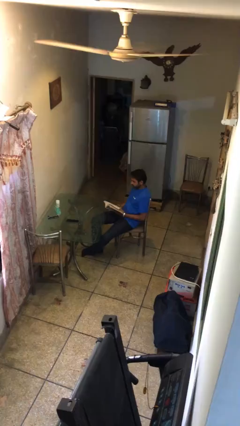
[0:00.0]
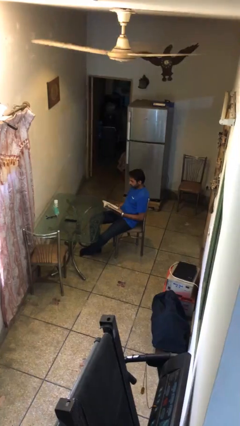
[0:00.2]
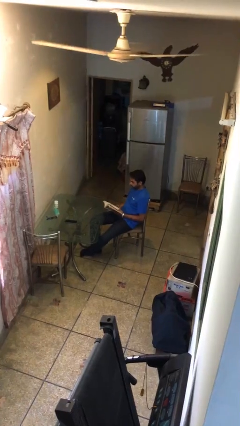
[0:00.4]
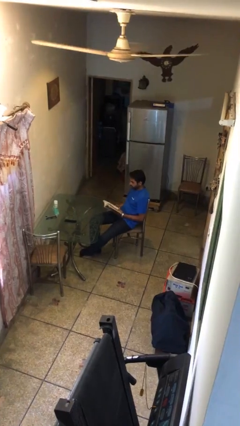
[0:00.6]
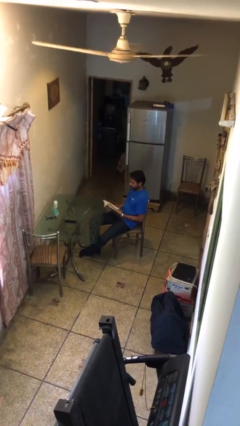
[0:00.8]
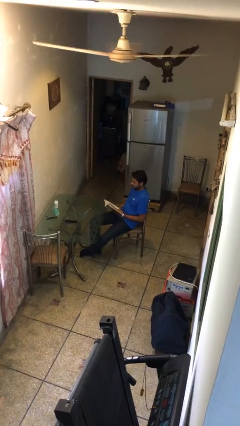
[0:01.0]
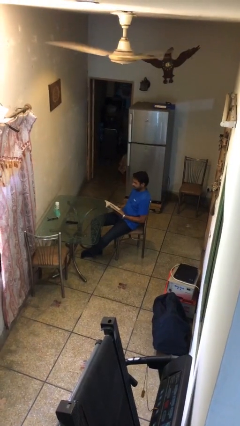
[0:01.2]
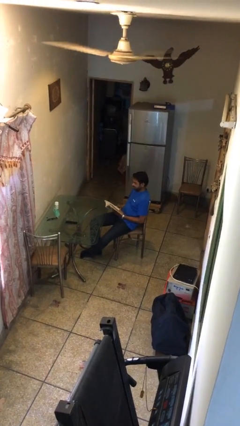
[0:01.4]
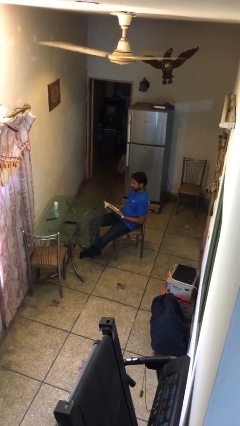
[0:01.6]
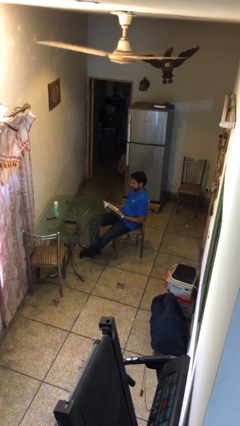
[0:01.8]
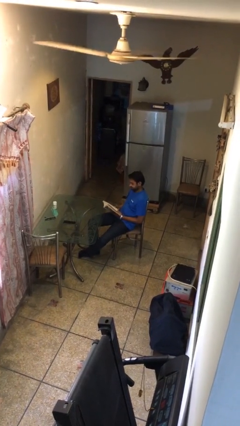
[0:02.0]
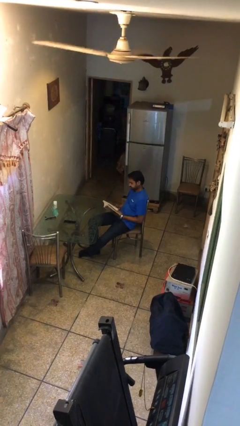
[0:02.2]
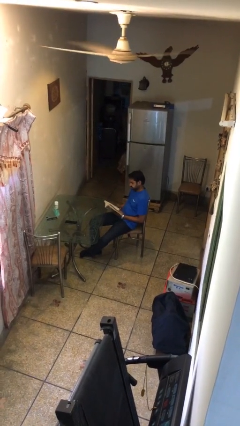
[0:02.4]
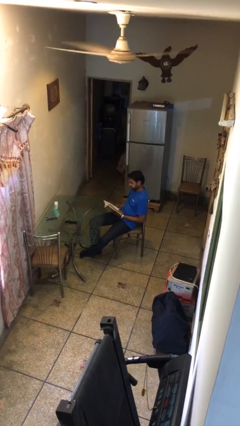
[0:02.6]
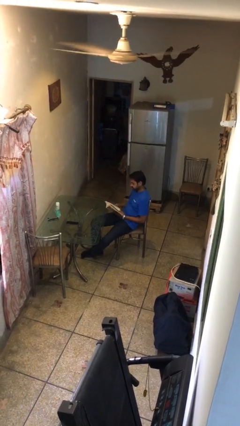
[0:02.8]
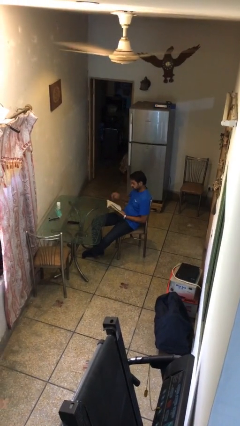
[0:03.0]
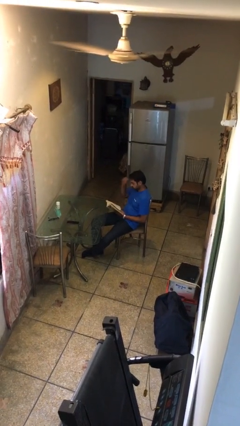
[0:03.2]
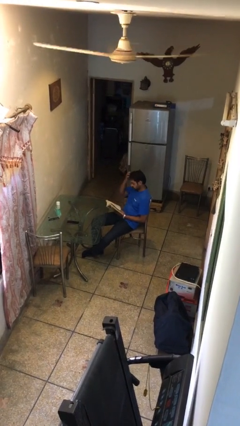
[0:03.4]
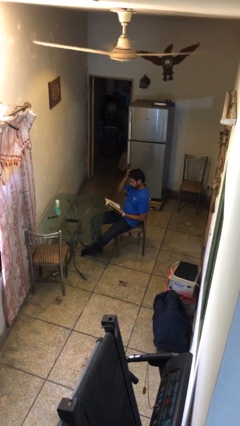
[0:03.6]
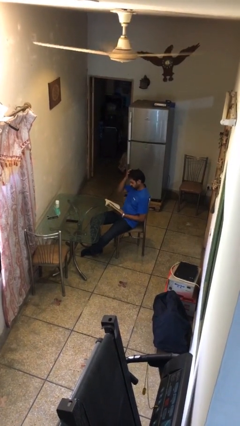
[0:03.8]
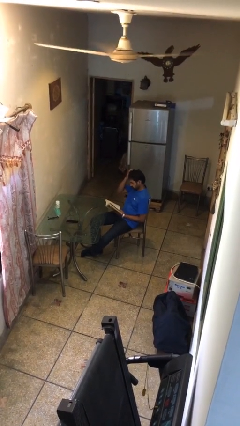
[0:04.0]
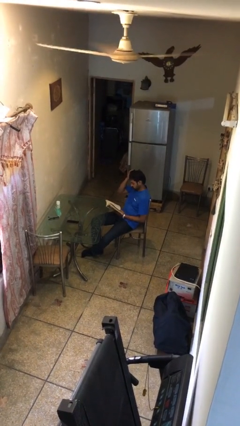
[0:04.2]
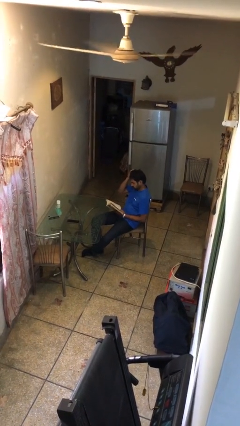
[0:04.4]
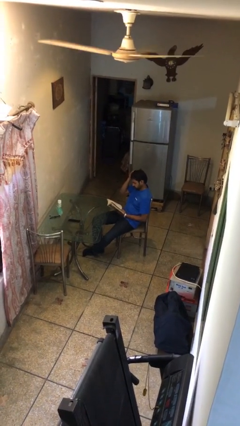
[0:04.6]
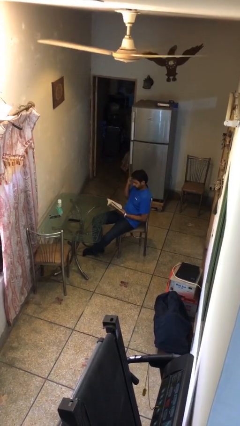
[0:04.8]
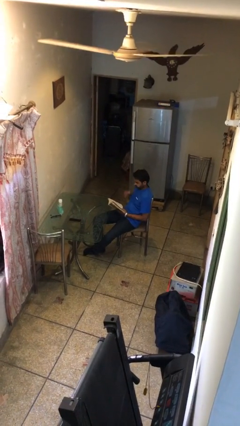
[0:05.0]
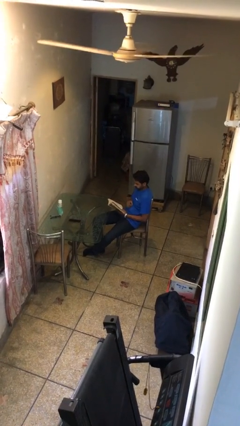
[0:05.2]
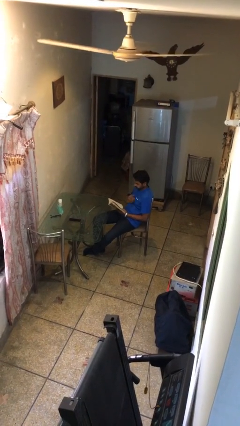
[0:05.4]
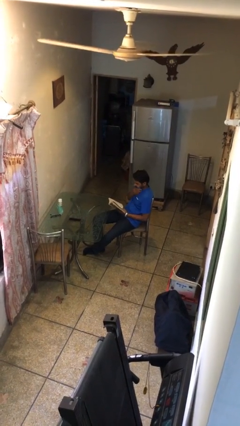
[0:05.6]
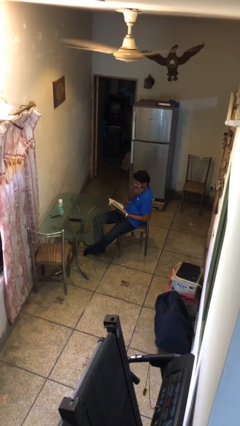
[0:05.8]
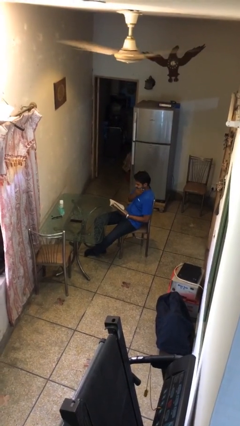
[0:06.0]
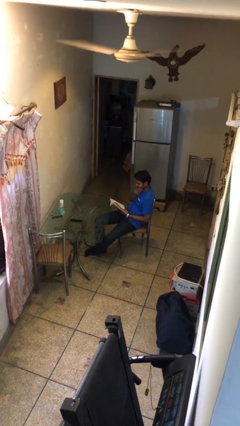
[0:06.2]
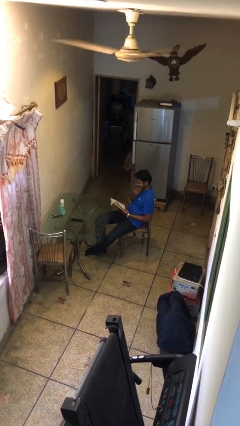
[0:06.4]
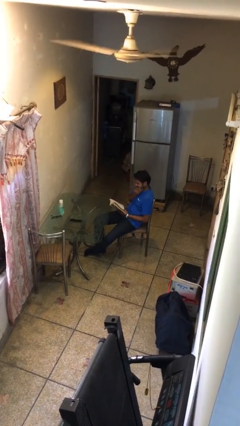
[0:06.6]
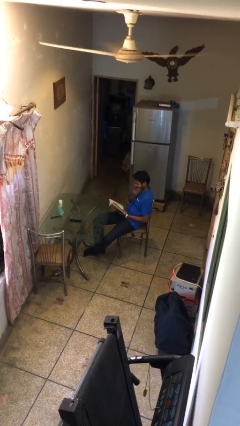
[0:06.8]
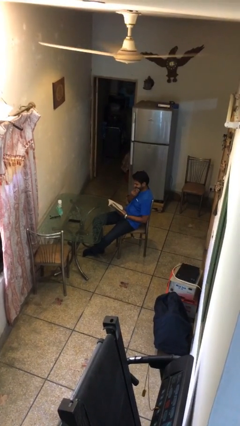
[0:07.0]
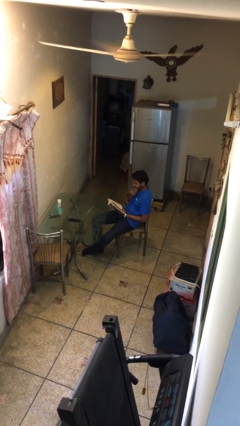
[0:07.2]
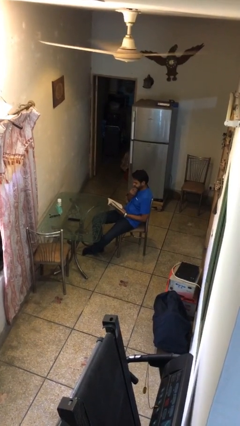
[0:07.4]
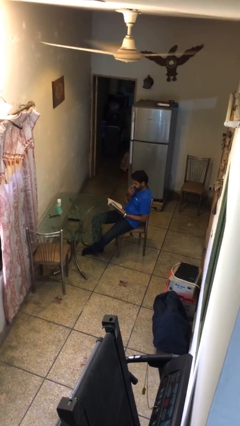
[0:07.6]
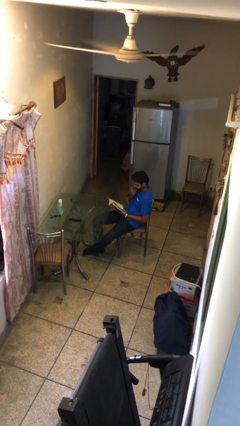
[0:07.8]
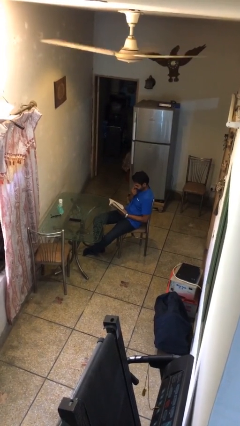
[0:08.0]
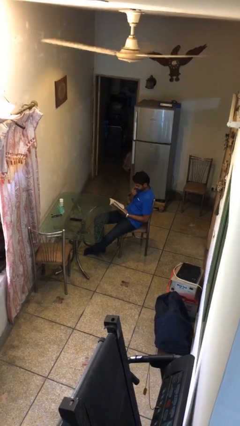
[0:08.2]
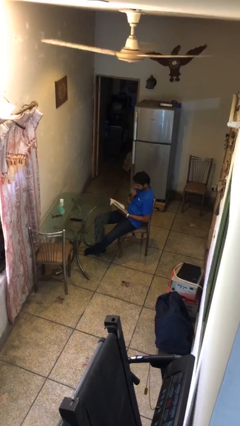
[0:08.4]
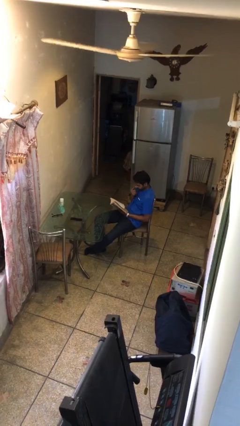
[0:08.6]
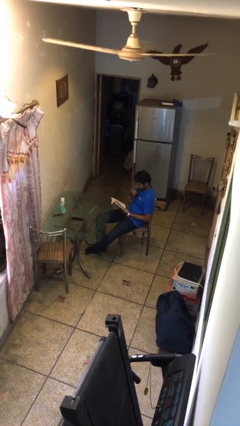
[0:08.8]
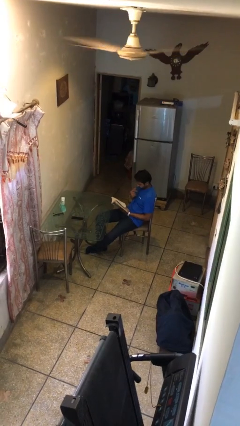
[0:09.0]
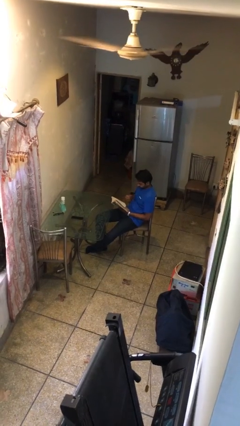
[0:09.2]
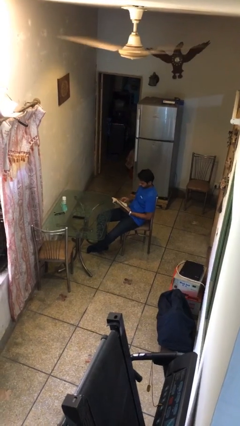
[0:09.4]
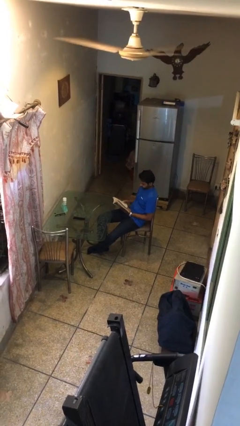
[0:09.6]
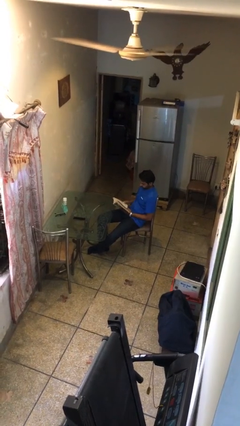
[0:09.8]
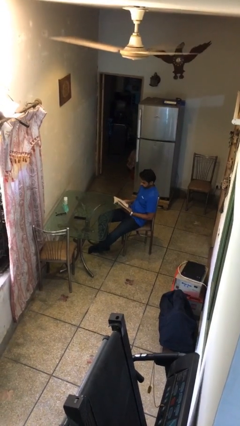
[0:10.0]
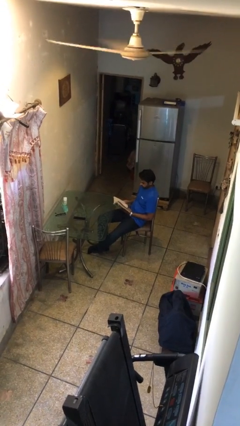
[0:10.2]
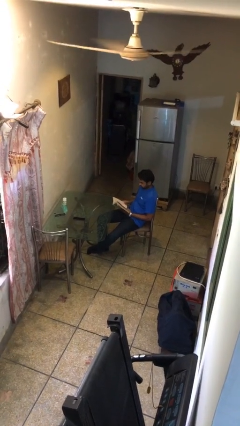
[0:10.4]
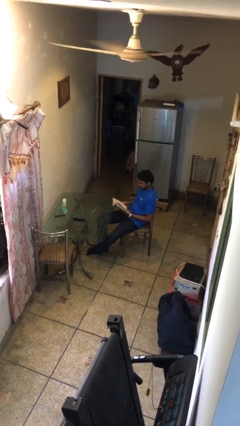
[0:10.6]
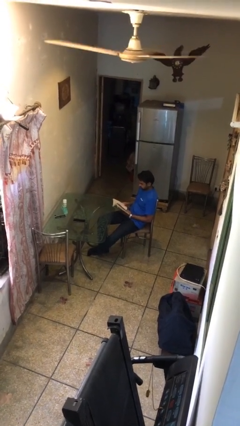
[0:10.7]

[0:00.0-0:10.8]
person reads document

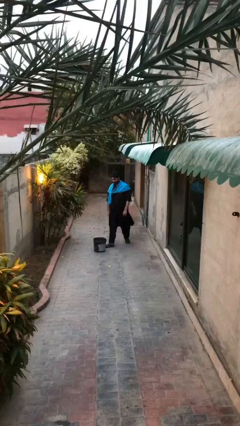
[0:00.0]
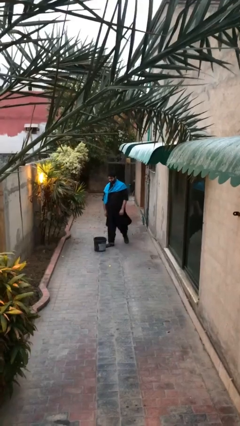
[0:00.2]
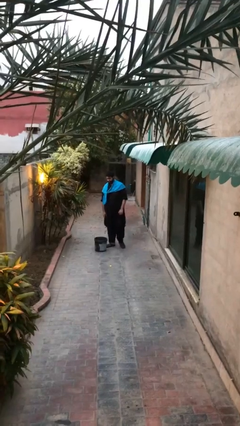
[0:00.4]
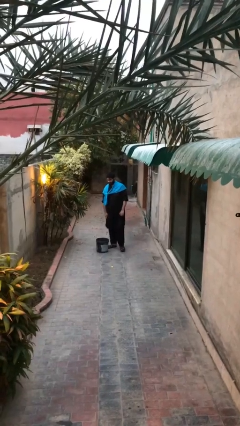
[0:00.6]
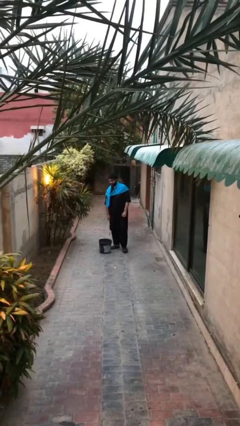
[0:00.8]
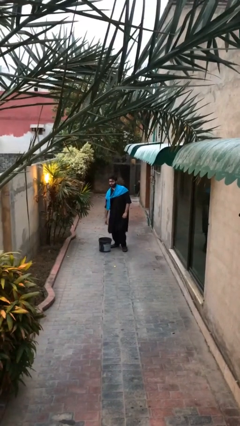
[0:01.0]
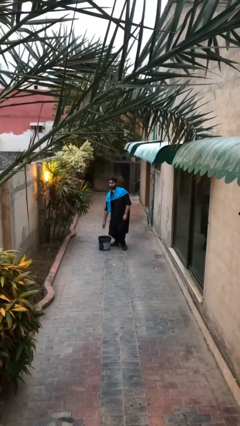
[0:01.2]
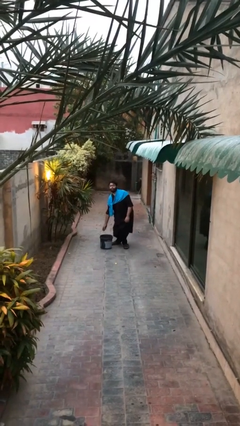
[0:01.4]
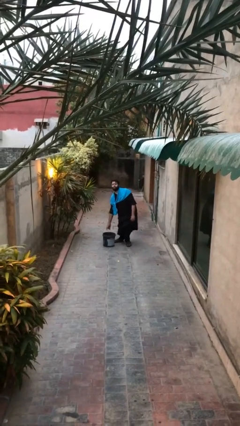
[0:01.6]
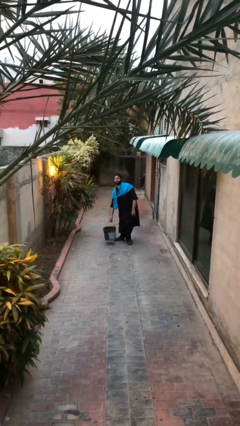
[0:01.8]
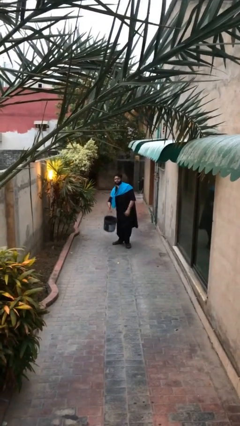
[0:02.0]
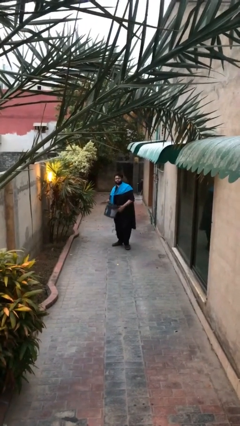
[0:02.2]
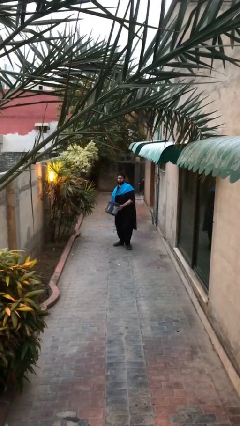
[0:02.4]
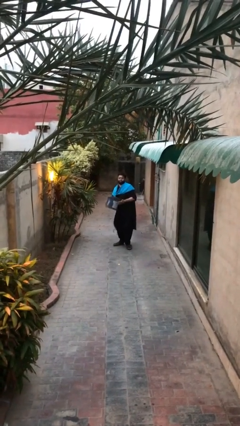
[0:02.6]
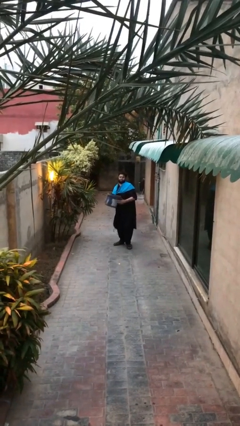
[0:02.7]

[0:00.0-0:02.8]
person picks up object from floor

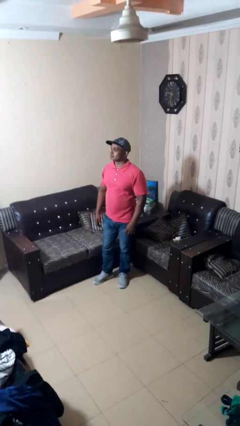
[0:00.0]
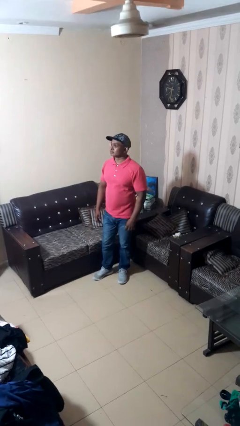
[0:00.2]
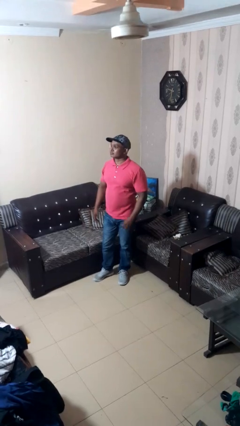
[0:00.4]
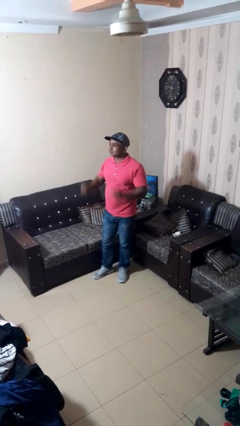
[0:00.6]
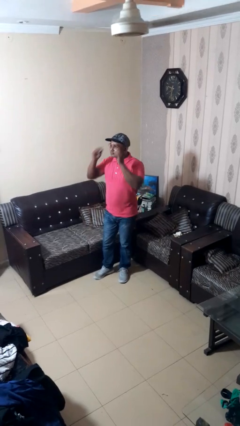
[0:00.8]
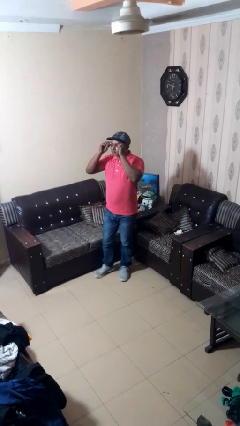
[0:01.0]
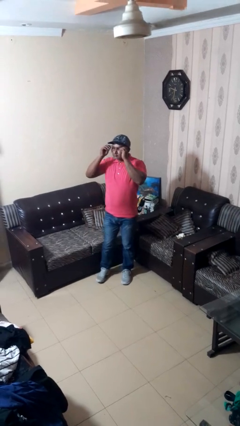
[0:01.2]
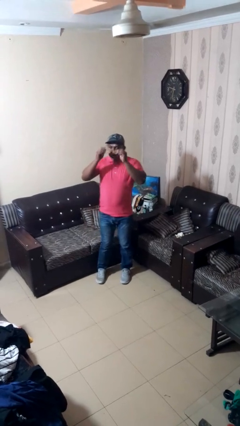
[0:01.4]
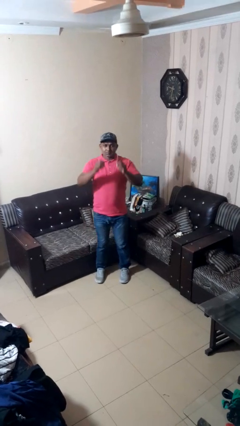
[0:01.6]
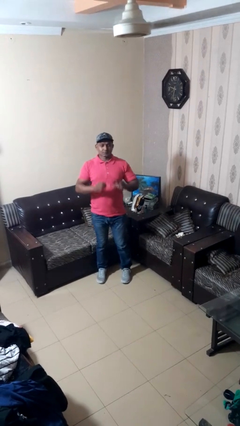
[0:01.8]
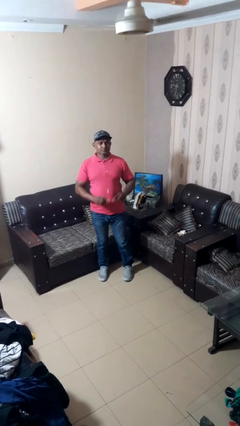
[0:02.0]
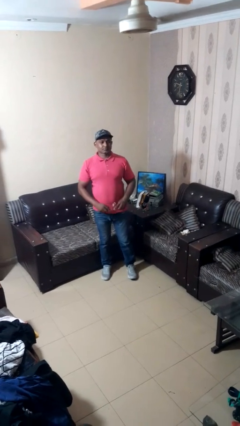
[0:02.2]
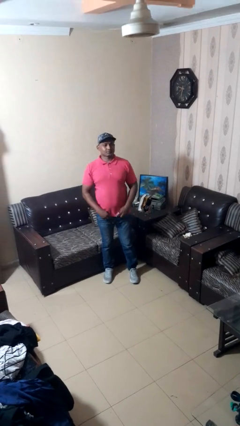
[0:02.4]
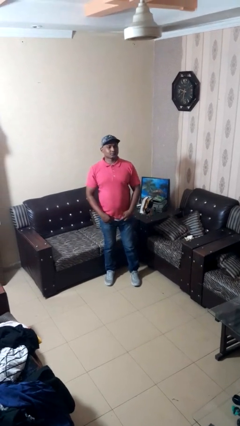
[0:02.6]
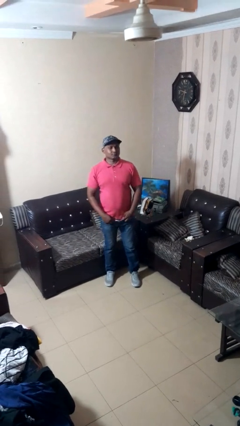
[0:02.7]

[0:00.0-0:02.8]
person takes off glasses

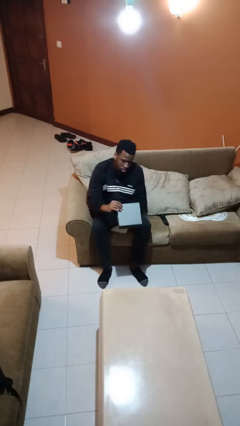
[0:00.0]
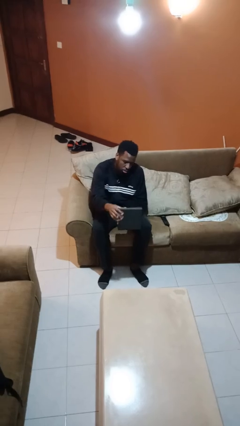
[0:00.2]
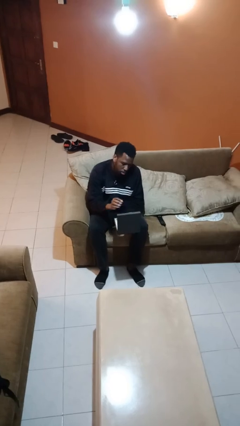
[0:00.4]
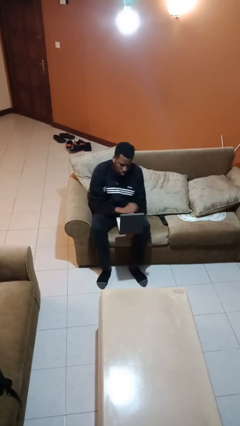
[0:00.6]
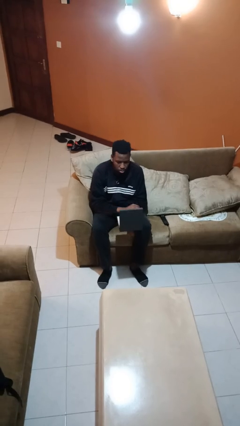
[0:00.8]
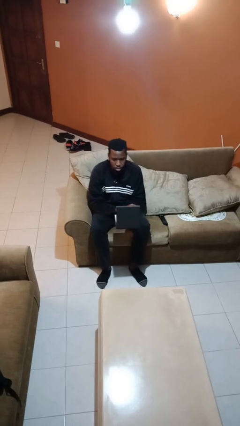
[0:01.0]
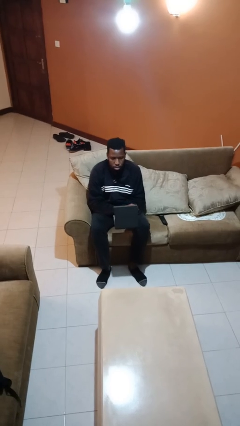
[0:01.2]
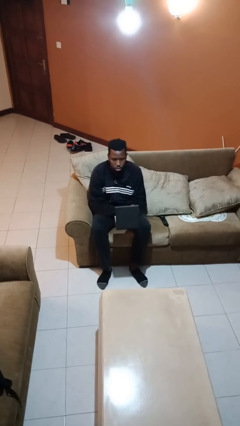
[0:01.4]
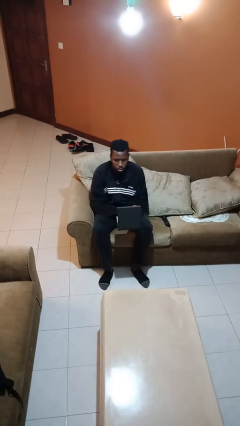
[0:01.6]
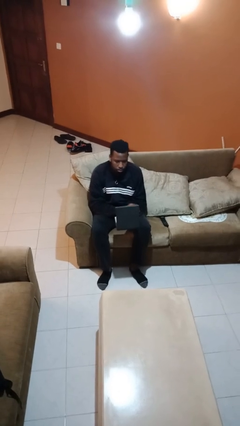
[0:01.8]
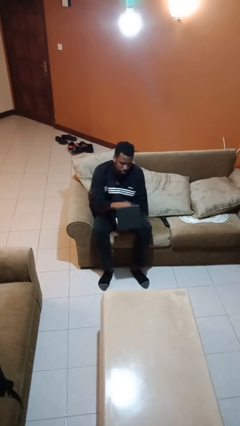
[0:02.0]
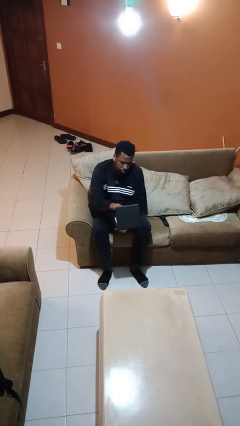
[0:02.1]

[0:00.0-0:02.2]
person opens jewelry box
